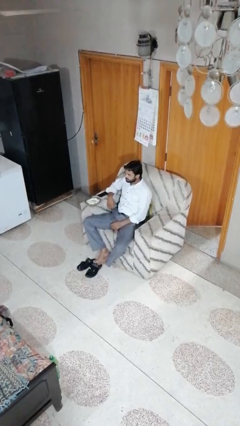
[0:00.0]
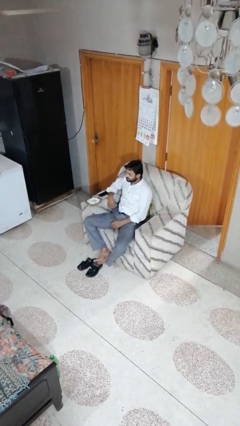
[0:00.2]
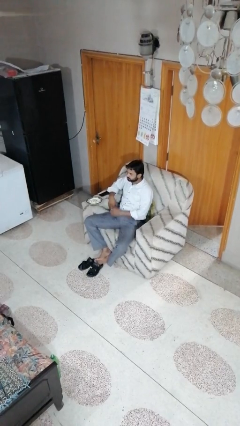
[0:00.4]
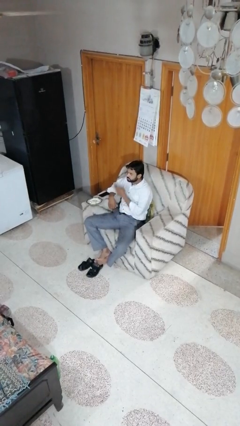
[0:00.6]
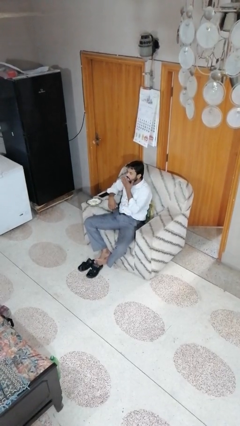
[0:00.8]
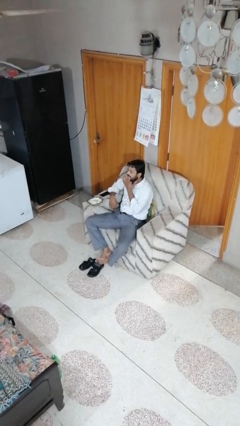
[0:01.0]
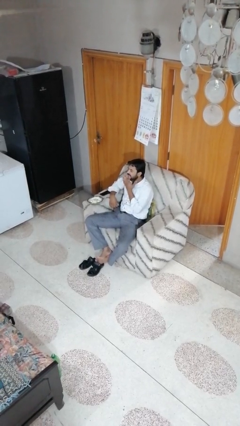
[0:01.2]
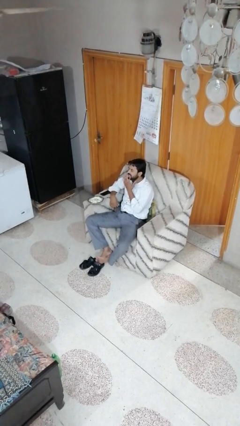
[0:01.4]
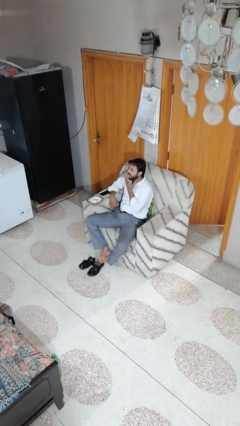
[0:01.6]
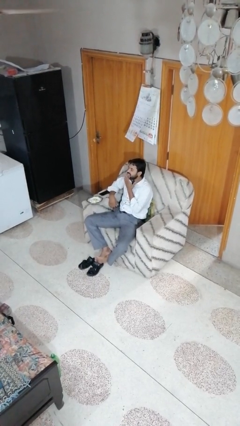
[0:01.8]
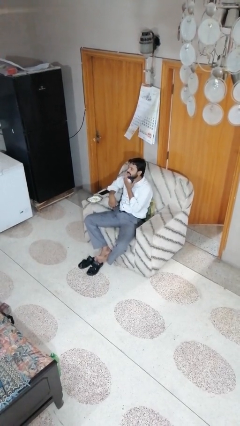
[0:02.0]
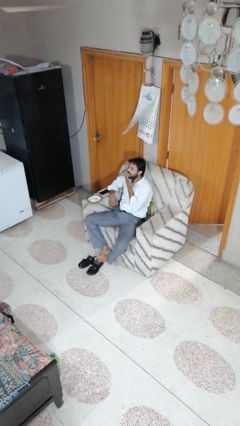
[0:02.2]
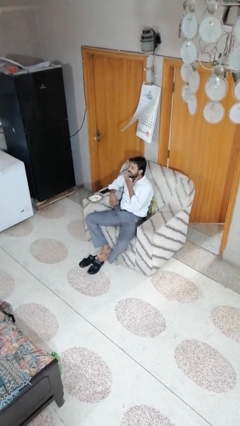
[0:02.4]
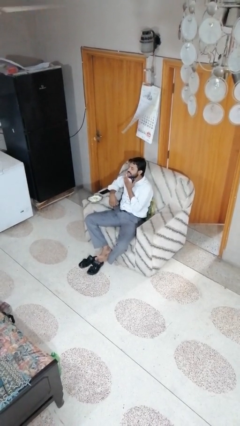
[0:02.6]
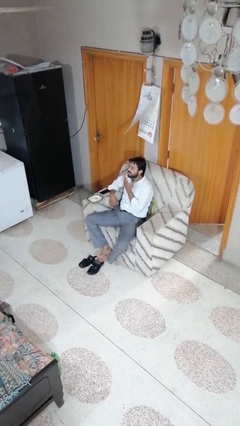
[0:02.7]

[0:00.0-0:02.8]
person licks fingers

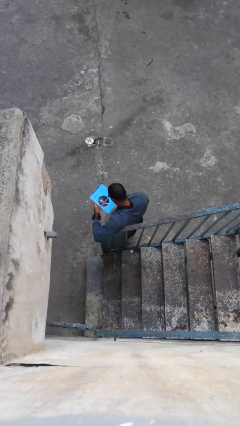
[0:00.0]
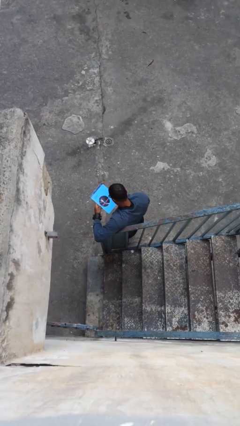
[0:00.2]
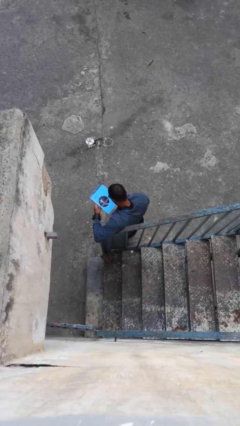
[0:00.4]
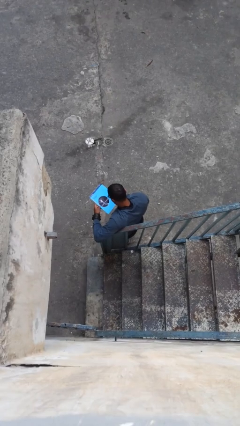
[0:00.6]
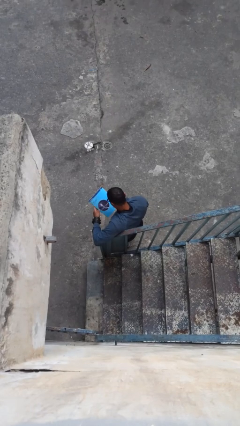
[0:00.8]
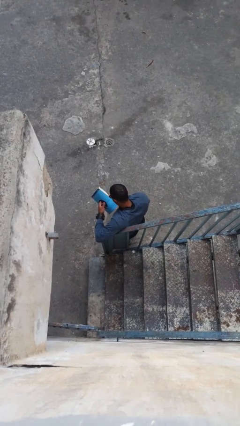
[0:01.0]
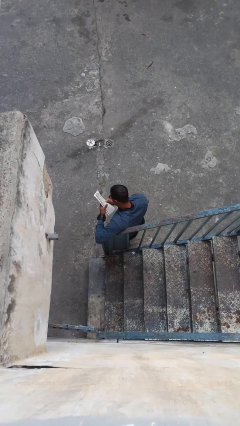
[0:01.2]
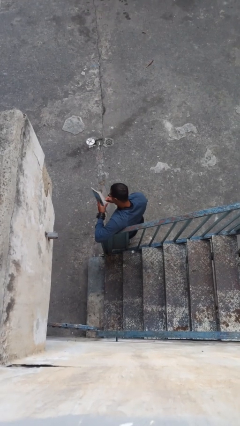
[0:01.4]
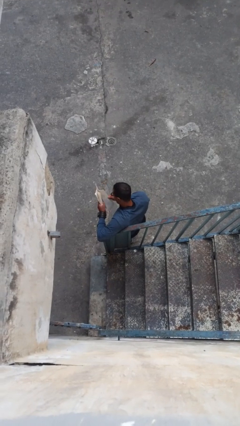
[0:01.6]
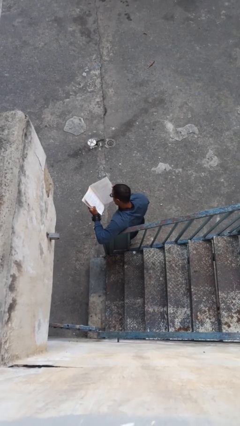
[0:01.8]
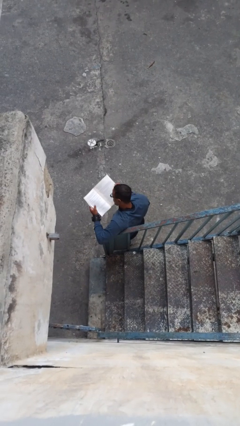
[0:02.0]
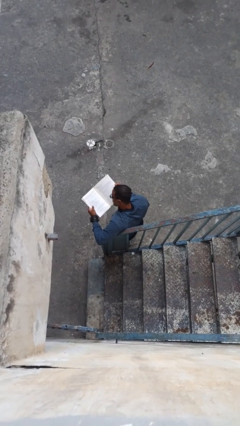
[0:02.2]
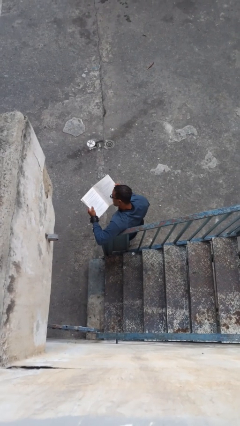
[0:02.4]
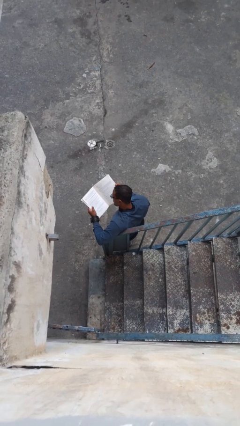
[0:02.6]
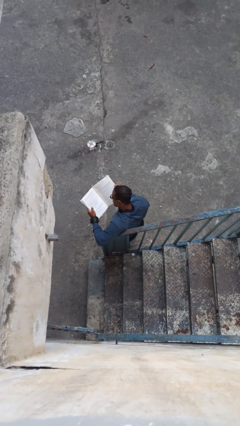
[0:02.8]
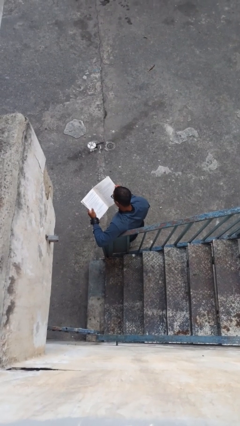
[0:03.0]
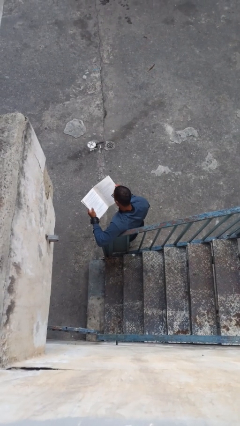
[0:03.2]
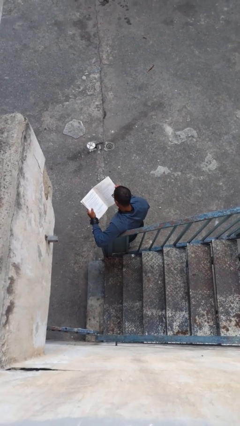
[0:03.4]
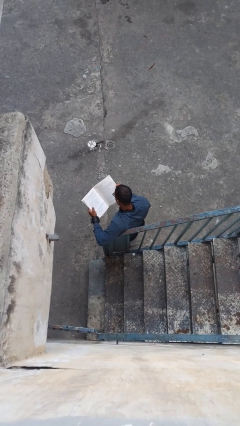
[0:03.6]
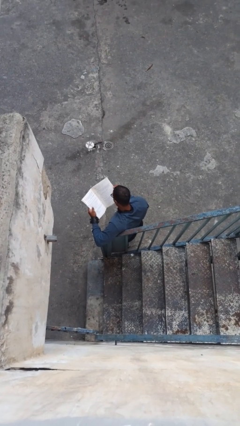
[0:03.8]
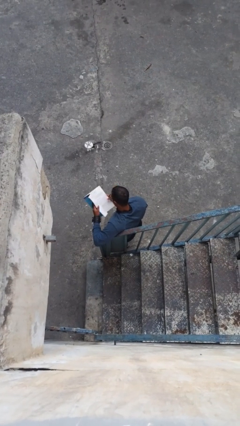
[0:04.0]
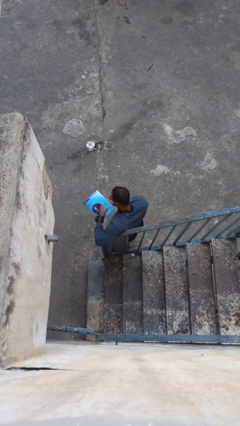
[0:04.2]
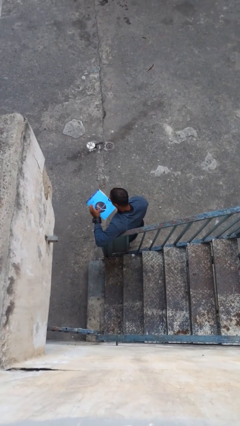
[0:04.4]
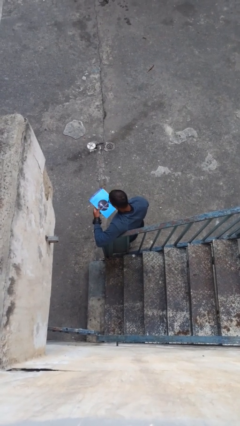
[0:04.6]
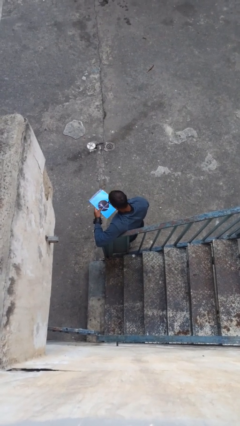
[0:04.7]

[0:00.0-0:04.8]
person reads document

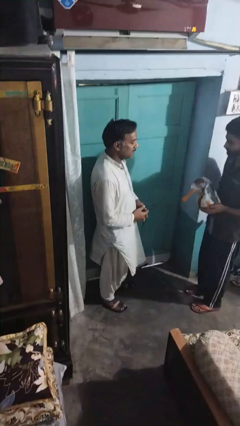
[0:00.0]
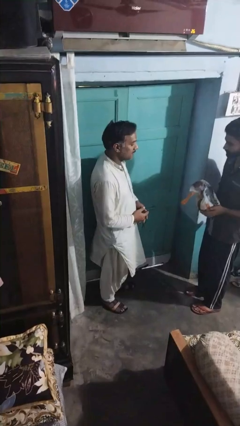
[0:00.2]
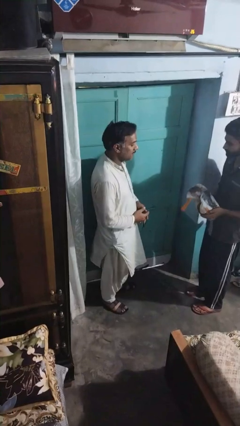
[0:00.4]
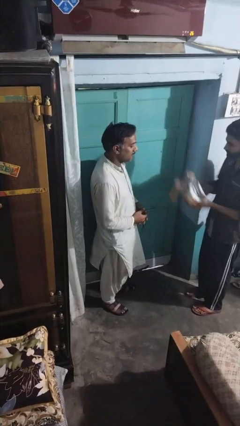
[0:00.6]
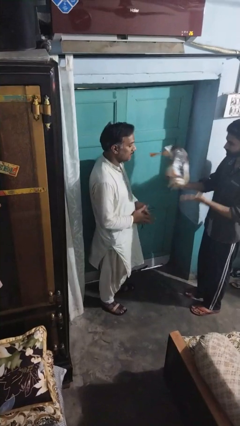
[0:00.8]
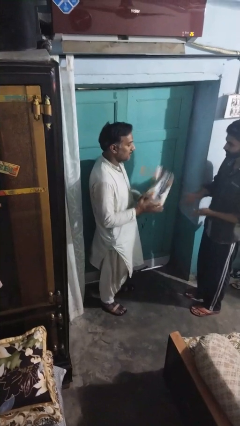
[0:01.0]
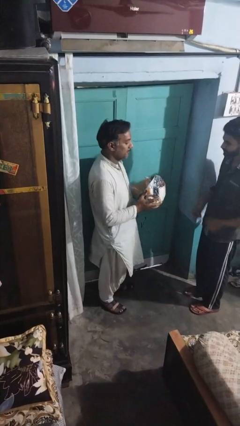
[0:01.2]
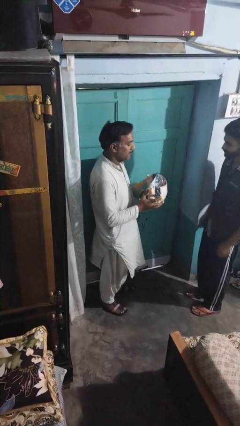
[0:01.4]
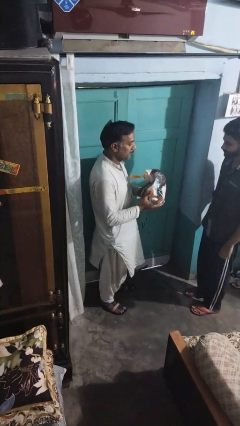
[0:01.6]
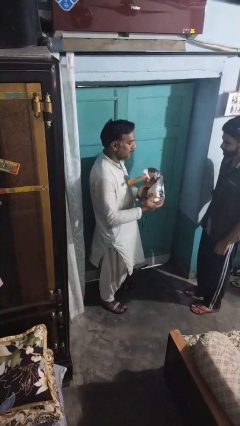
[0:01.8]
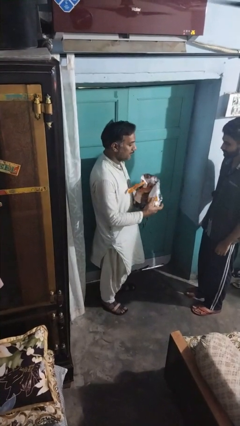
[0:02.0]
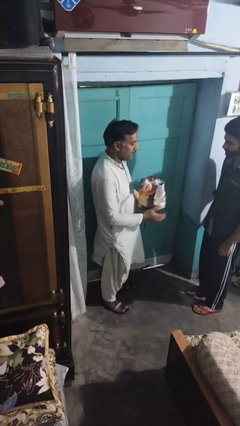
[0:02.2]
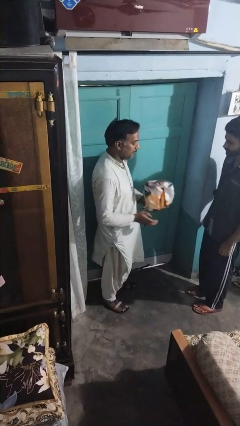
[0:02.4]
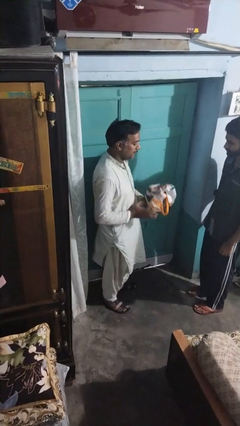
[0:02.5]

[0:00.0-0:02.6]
person catches object from person

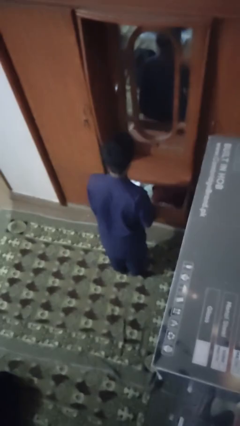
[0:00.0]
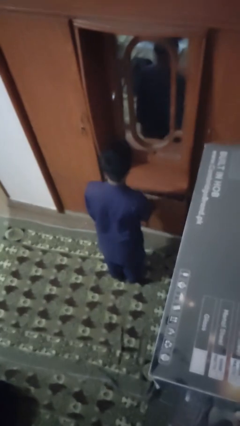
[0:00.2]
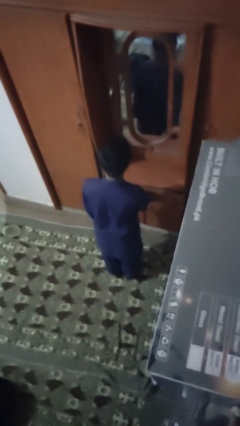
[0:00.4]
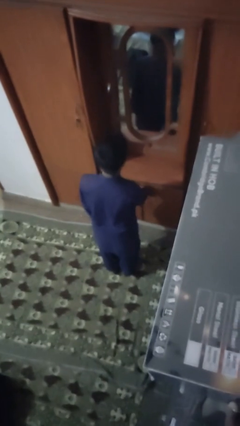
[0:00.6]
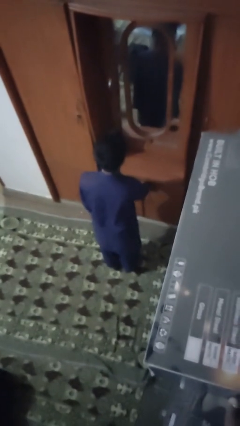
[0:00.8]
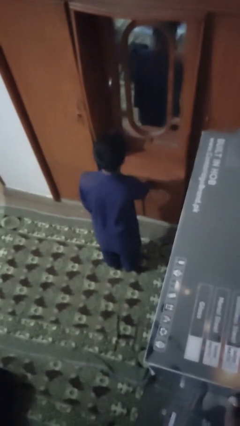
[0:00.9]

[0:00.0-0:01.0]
person closes dresser drawer

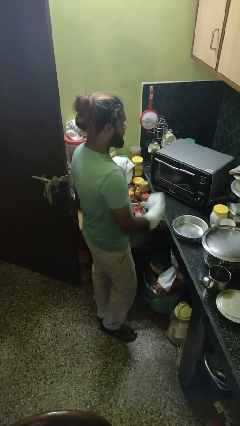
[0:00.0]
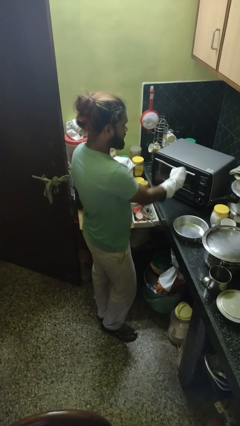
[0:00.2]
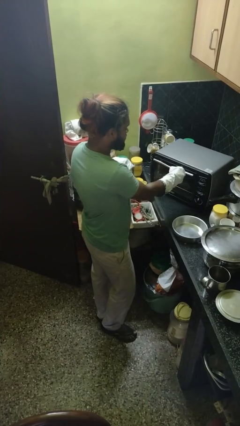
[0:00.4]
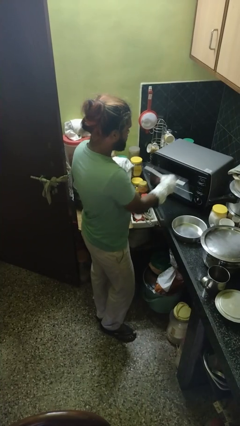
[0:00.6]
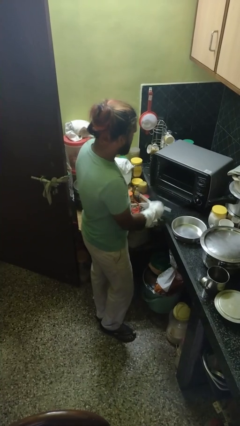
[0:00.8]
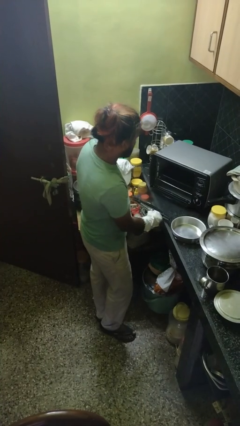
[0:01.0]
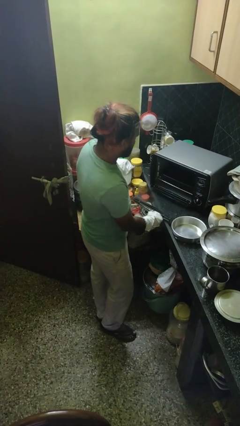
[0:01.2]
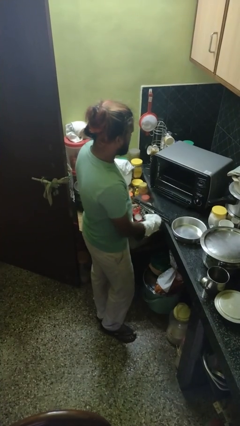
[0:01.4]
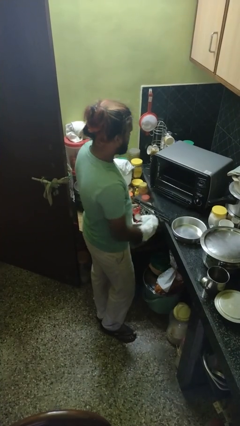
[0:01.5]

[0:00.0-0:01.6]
person opens oven door

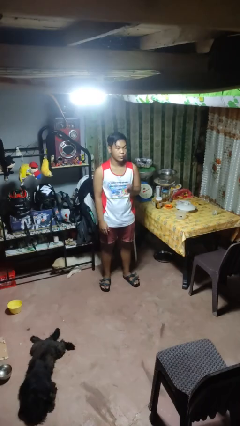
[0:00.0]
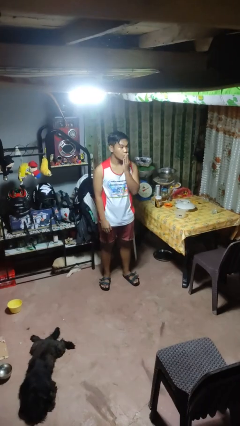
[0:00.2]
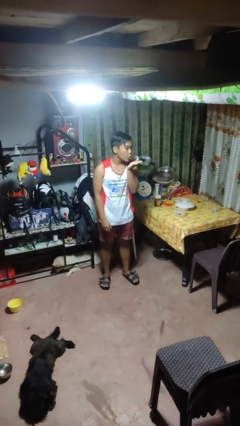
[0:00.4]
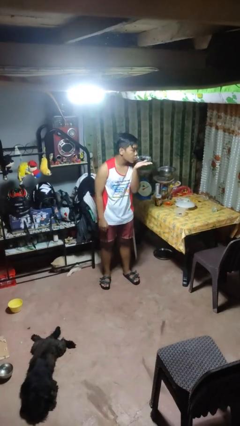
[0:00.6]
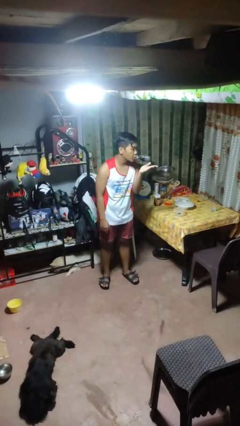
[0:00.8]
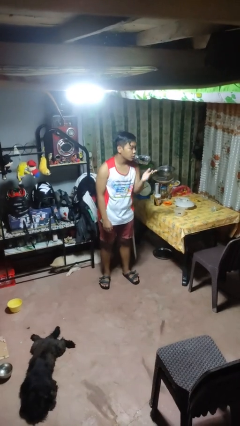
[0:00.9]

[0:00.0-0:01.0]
person gestures blow kiss

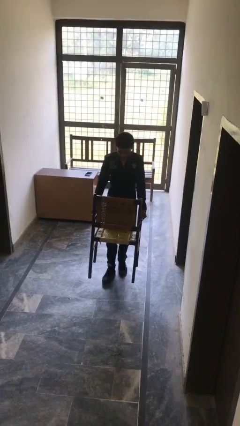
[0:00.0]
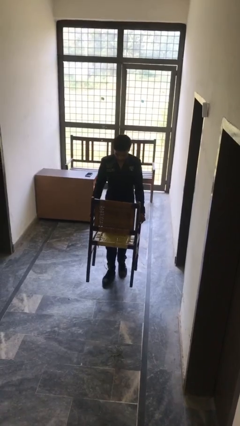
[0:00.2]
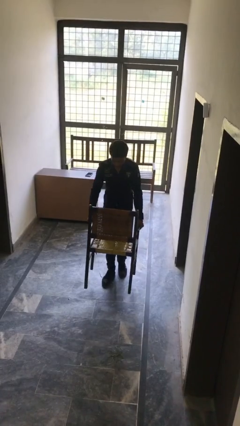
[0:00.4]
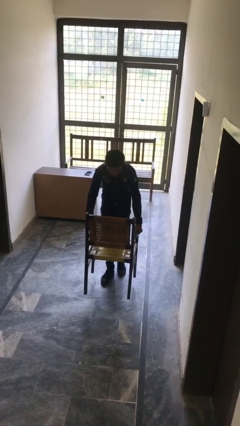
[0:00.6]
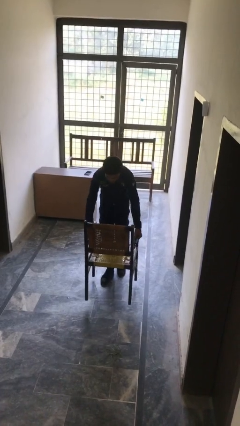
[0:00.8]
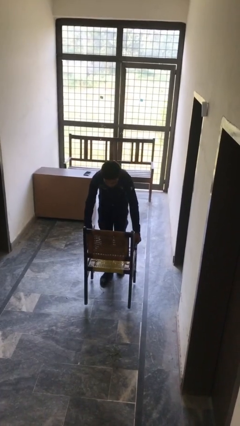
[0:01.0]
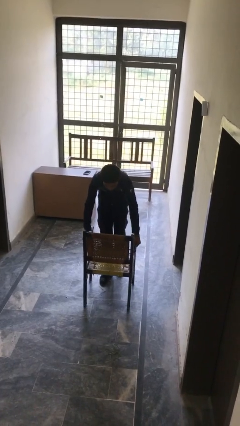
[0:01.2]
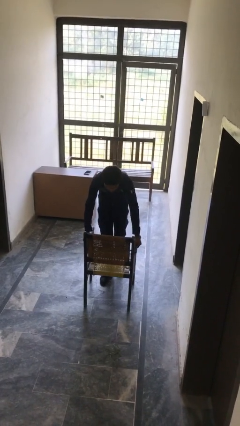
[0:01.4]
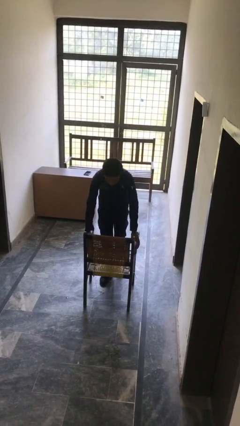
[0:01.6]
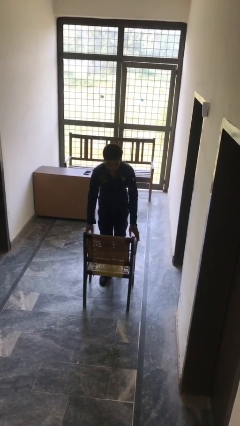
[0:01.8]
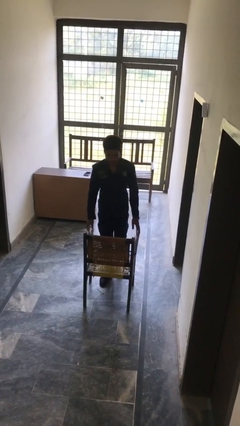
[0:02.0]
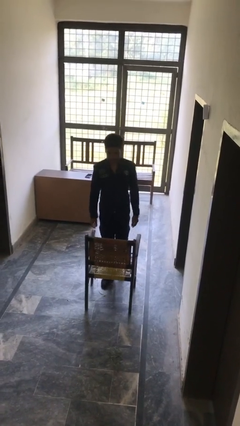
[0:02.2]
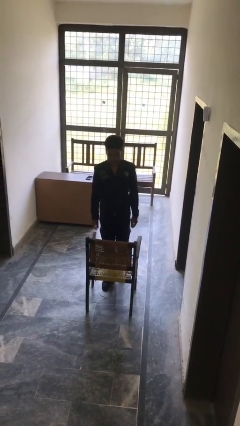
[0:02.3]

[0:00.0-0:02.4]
person puts down object on table

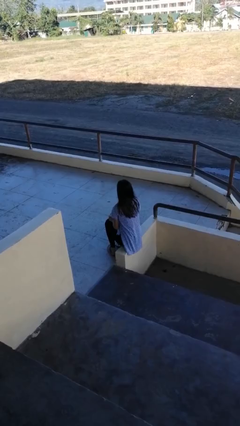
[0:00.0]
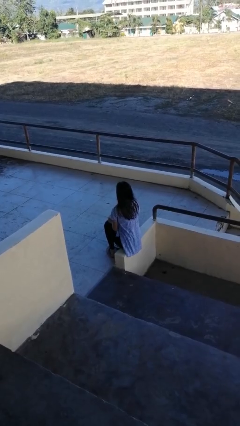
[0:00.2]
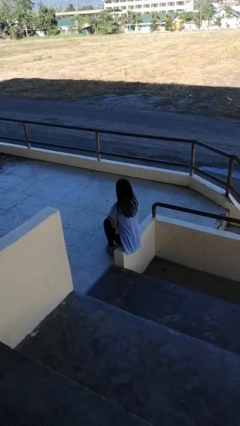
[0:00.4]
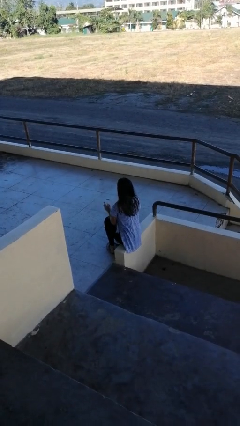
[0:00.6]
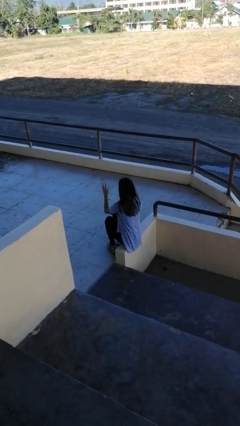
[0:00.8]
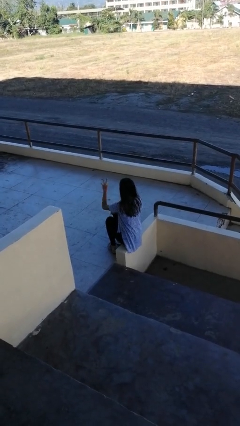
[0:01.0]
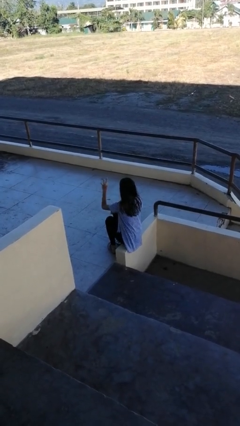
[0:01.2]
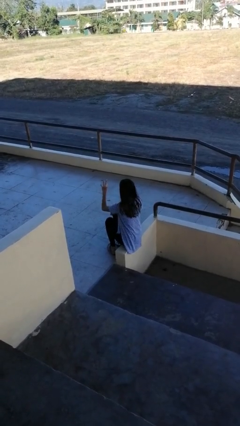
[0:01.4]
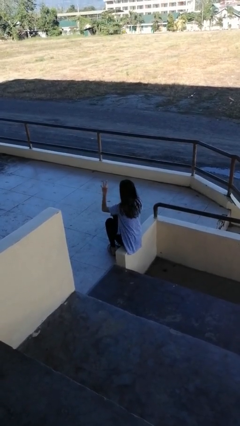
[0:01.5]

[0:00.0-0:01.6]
person gestures number three
